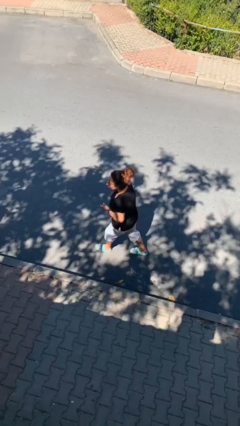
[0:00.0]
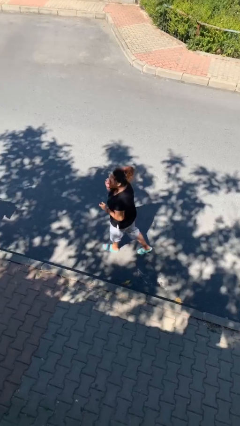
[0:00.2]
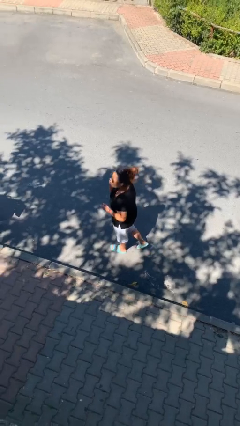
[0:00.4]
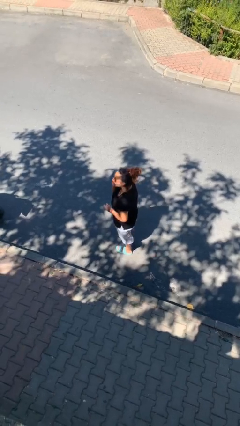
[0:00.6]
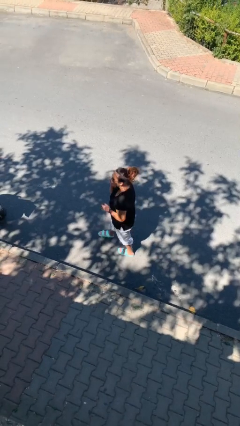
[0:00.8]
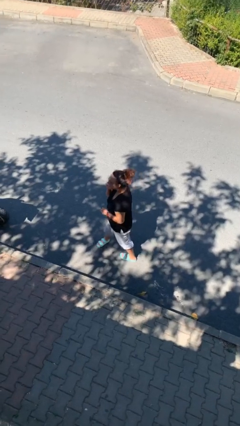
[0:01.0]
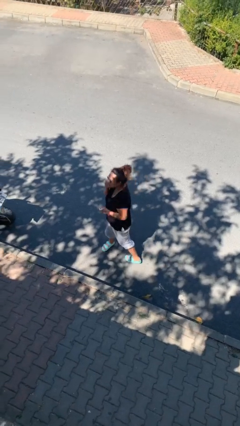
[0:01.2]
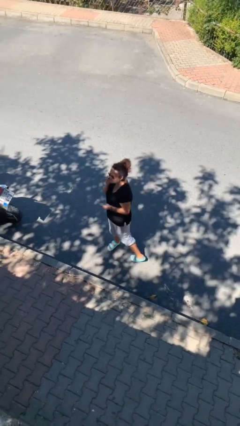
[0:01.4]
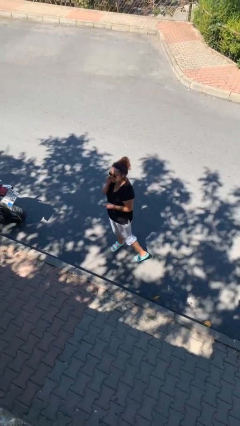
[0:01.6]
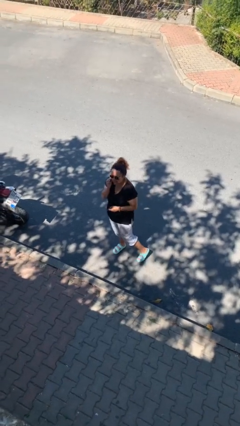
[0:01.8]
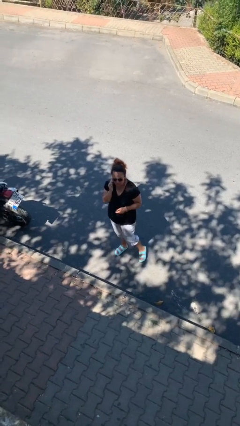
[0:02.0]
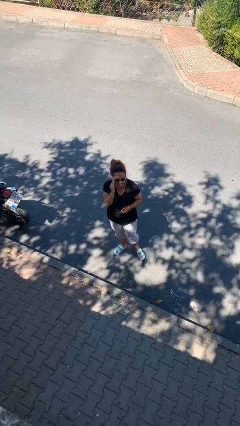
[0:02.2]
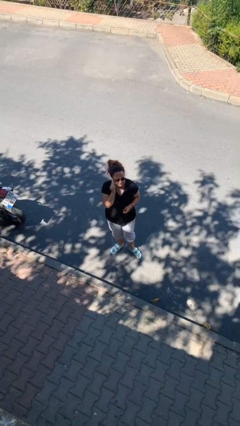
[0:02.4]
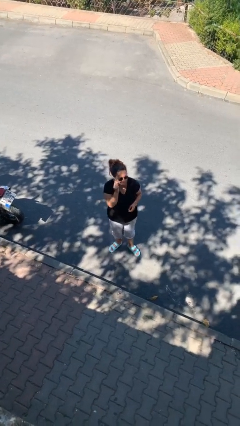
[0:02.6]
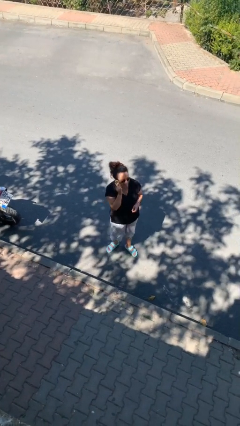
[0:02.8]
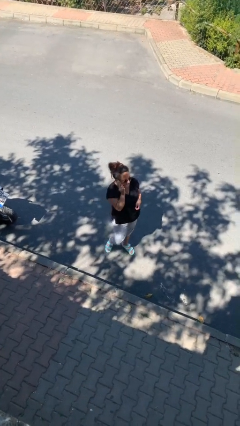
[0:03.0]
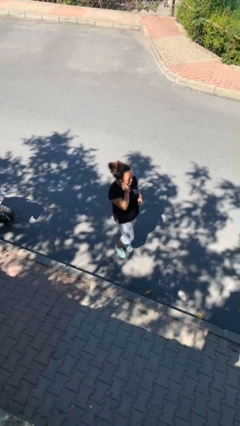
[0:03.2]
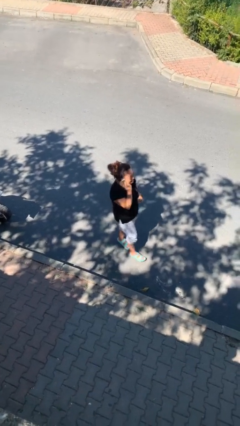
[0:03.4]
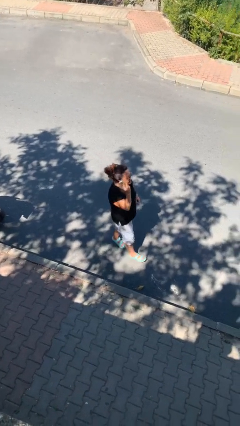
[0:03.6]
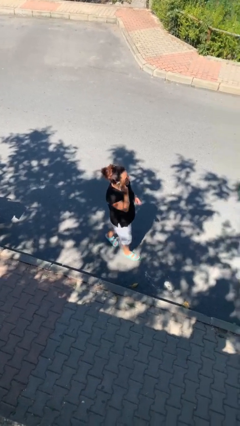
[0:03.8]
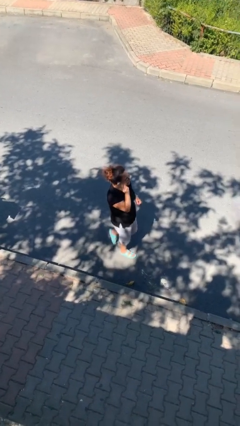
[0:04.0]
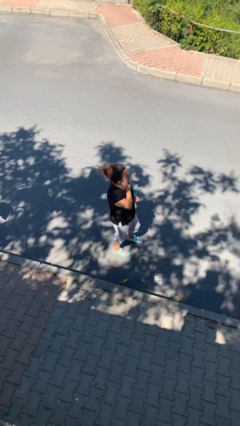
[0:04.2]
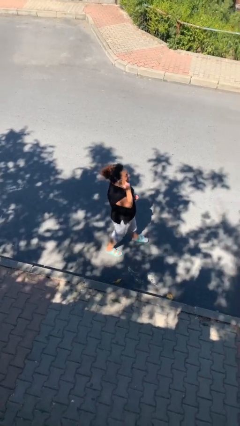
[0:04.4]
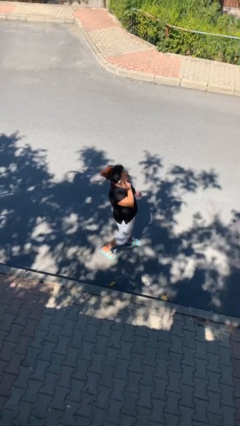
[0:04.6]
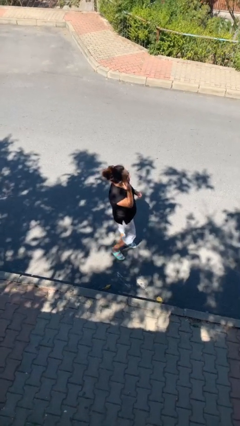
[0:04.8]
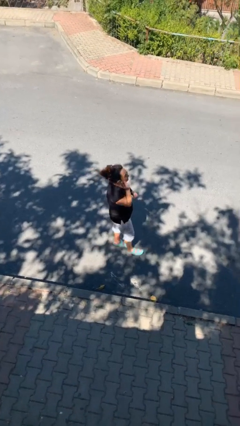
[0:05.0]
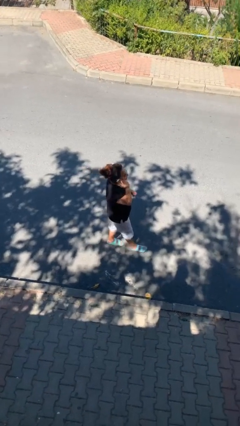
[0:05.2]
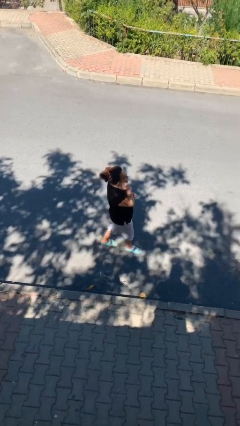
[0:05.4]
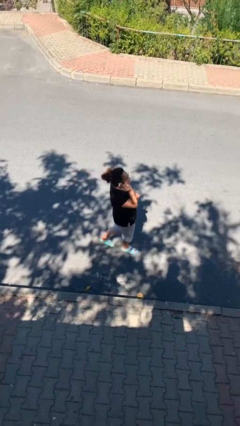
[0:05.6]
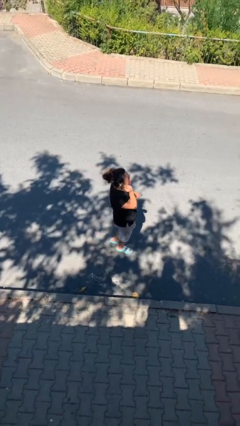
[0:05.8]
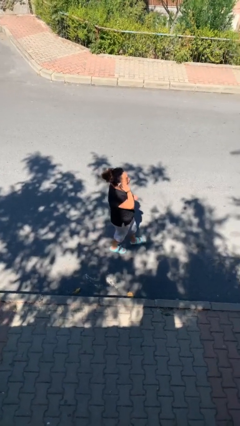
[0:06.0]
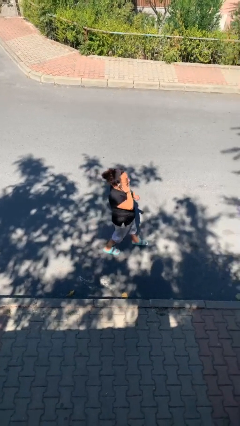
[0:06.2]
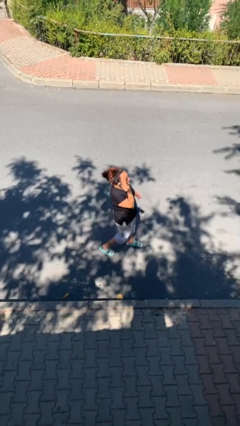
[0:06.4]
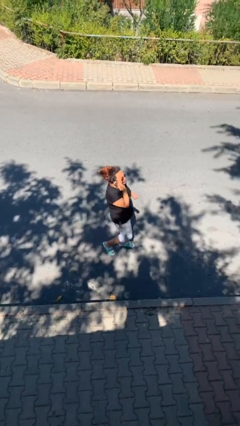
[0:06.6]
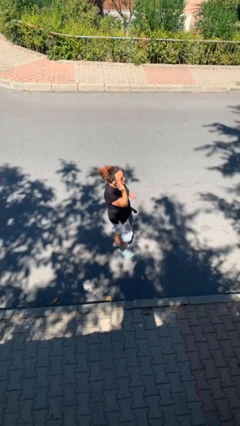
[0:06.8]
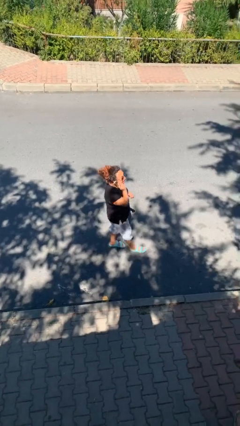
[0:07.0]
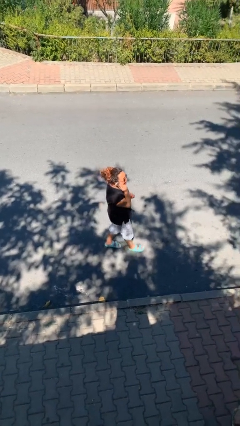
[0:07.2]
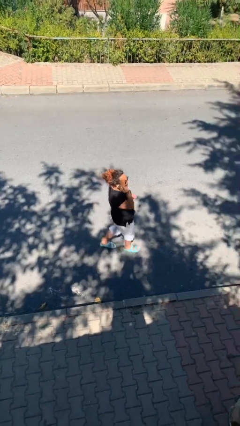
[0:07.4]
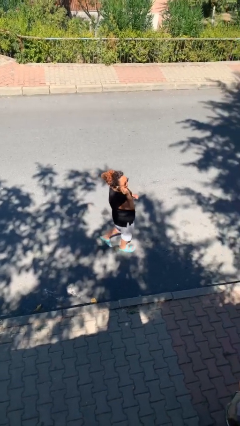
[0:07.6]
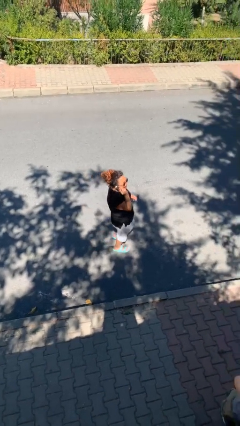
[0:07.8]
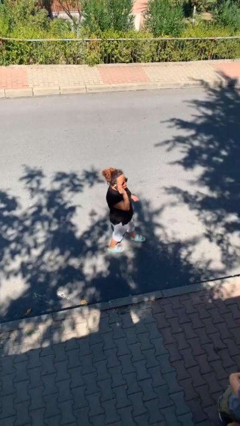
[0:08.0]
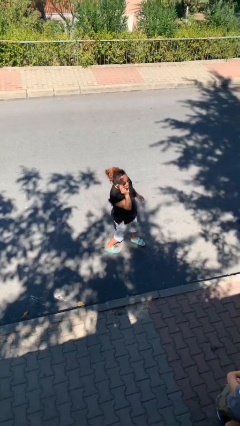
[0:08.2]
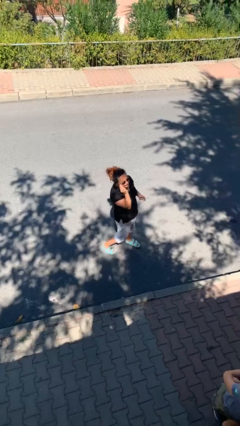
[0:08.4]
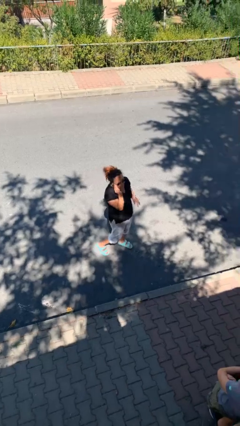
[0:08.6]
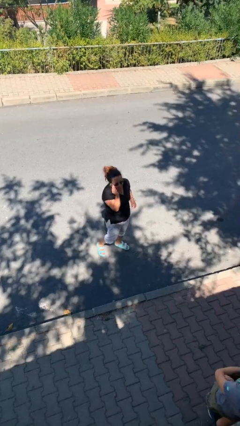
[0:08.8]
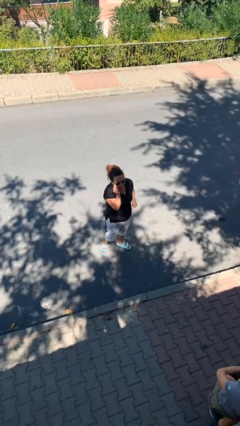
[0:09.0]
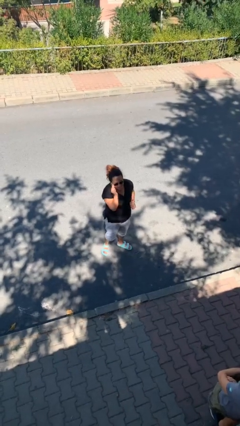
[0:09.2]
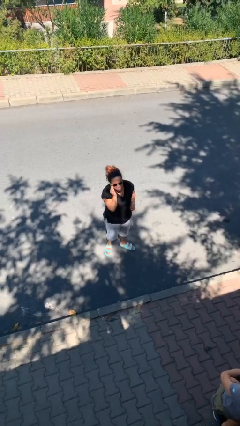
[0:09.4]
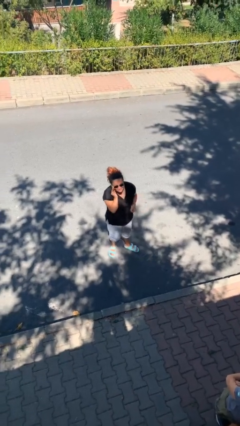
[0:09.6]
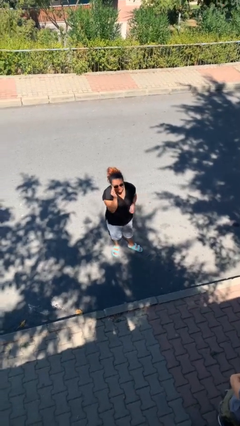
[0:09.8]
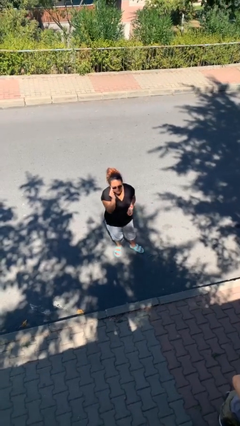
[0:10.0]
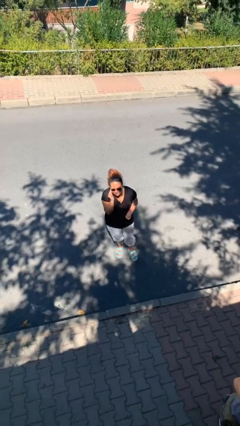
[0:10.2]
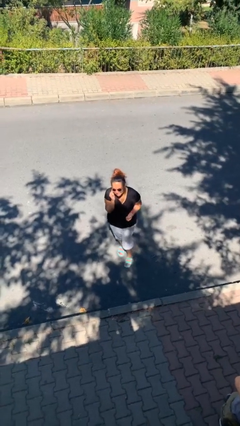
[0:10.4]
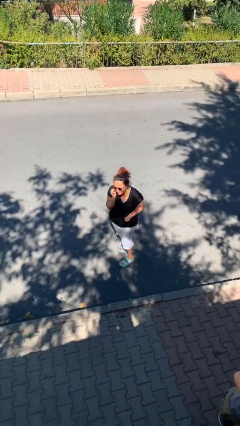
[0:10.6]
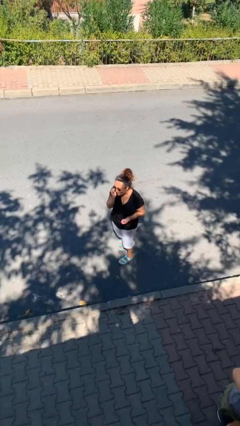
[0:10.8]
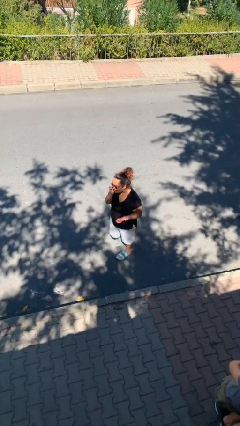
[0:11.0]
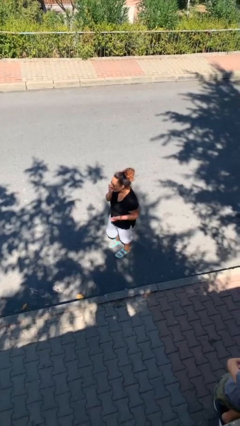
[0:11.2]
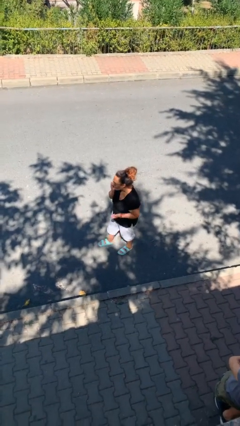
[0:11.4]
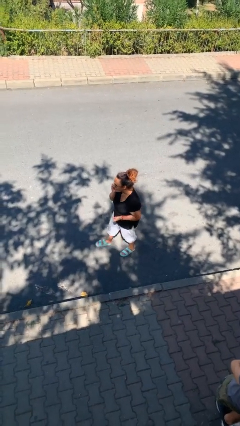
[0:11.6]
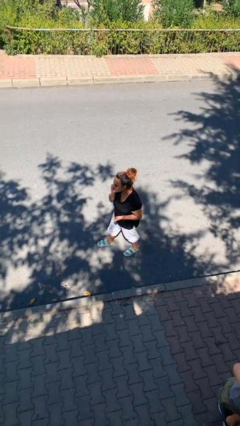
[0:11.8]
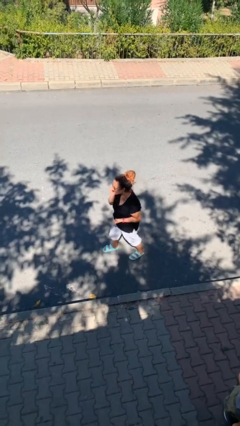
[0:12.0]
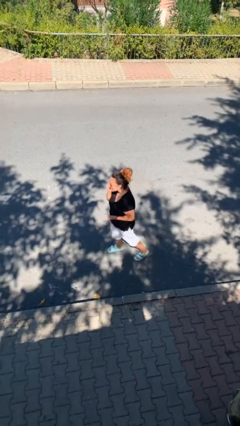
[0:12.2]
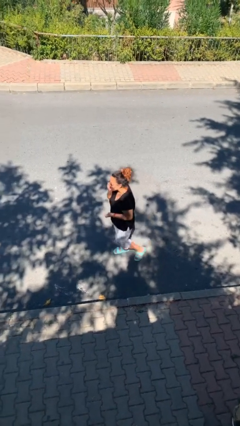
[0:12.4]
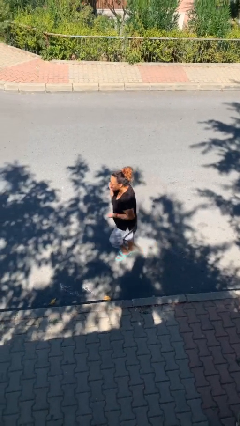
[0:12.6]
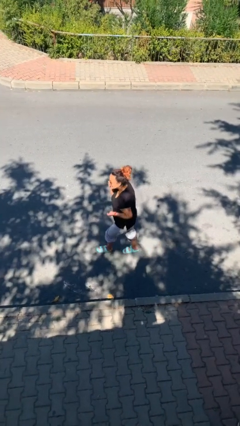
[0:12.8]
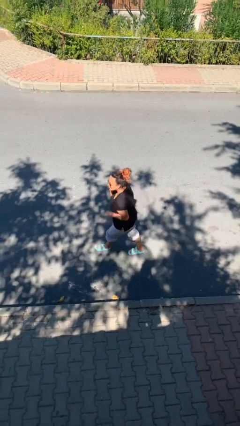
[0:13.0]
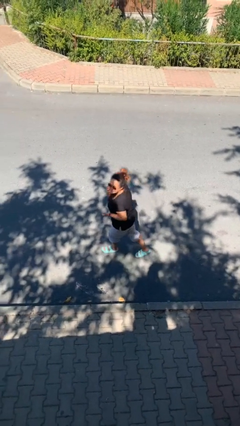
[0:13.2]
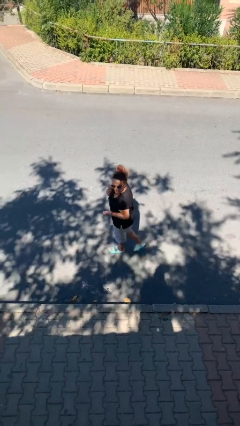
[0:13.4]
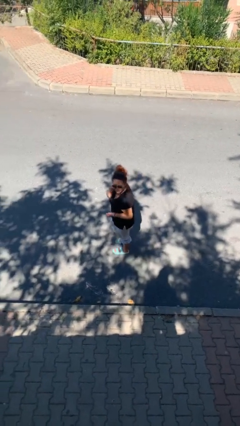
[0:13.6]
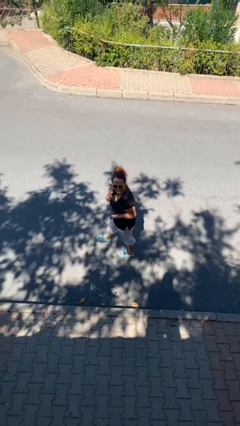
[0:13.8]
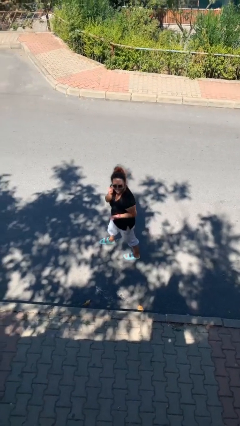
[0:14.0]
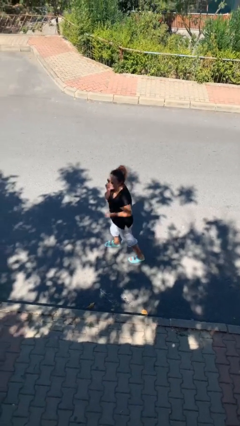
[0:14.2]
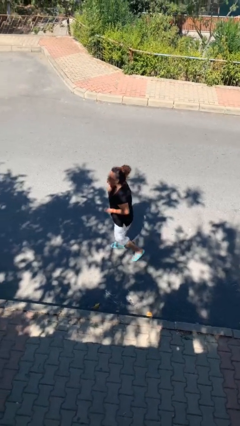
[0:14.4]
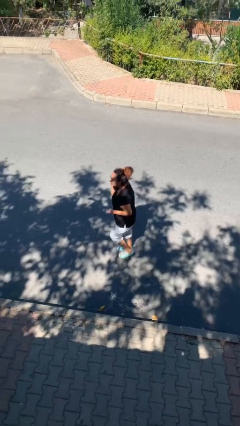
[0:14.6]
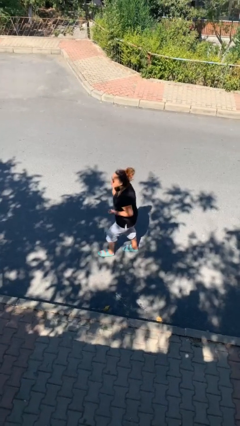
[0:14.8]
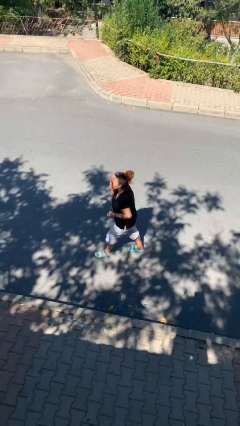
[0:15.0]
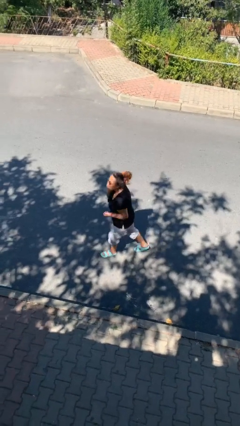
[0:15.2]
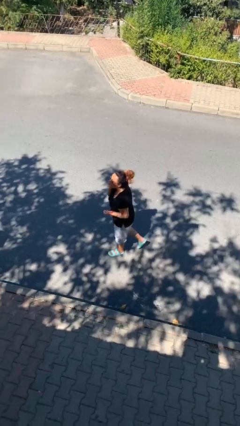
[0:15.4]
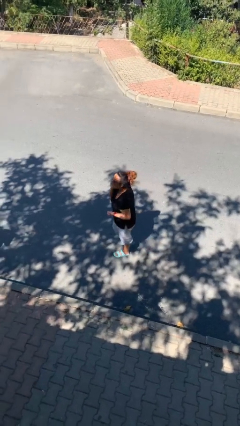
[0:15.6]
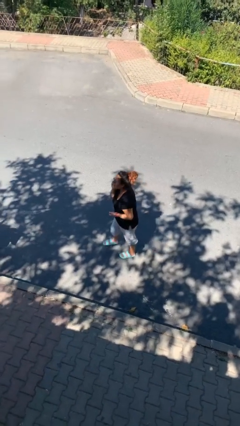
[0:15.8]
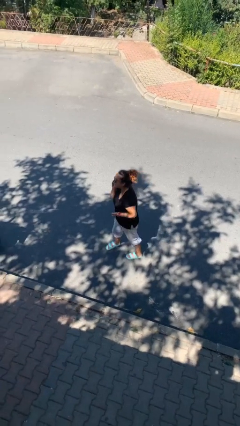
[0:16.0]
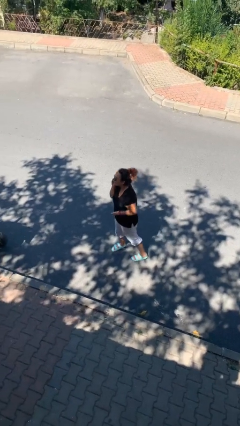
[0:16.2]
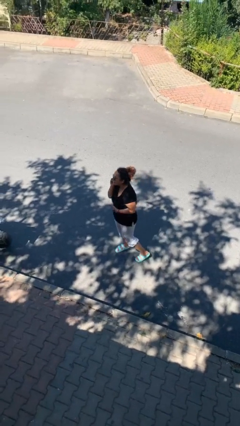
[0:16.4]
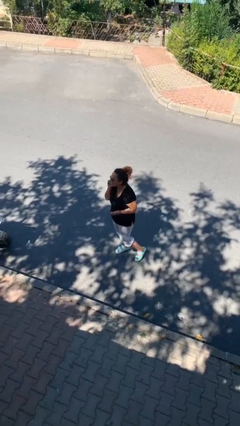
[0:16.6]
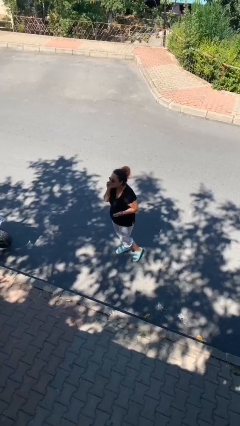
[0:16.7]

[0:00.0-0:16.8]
person talks on phone

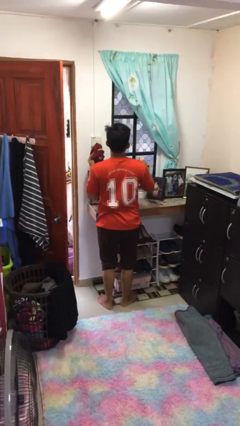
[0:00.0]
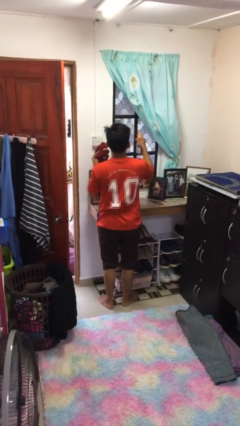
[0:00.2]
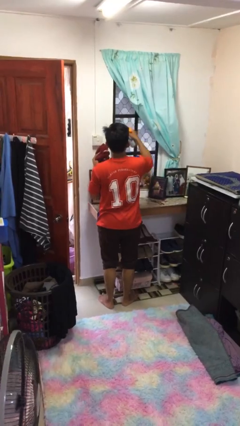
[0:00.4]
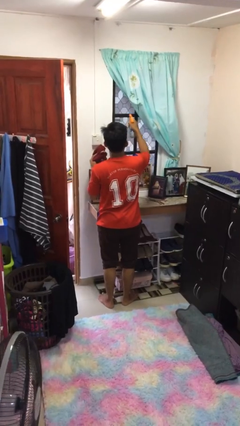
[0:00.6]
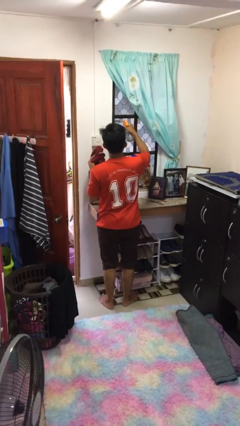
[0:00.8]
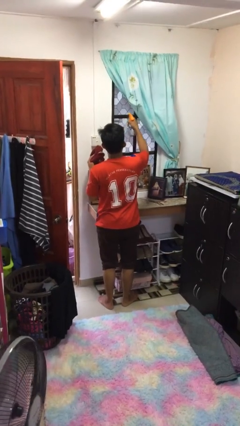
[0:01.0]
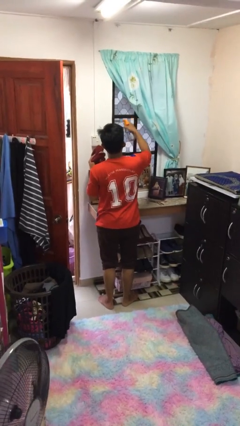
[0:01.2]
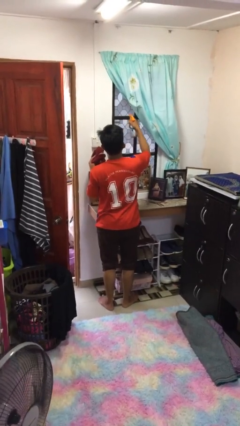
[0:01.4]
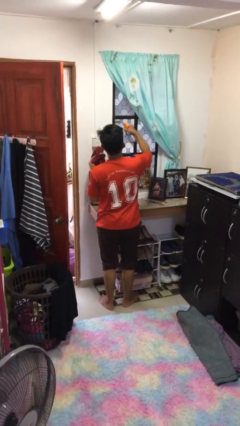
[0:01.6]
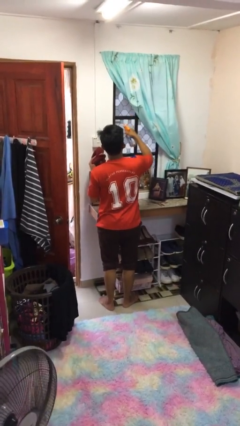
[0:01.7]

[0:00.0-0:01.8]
person sprays from bottle

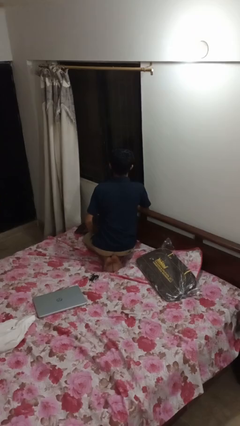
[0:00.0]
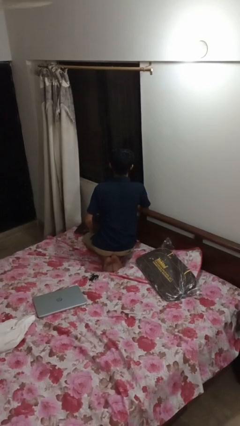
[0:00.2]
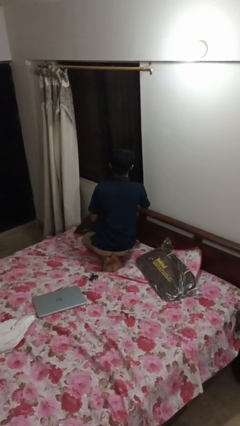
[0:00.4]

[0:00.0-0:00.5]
person opens home window
